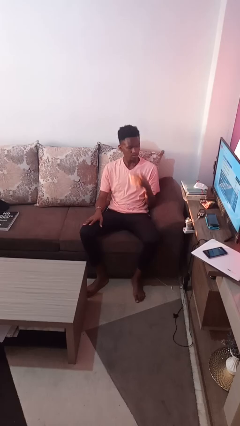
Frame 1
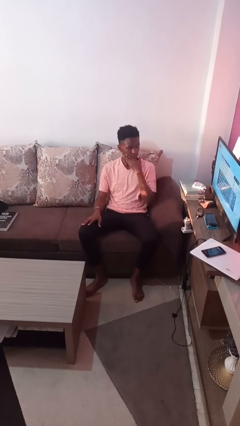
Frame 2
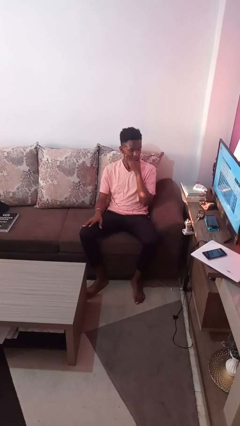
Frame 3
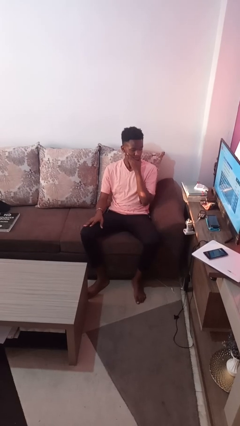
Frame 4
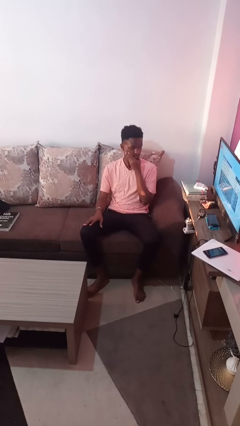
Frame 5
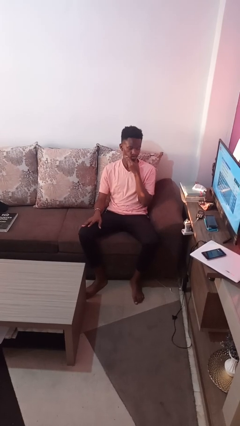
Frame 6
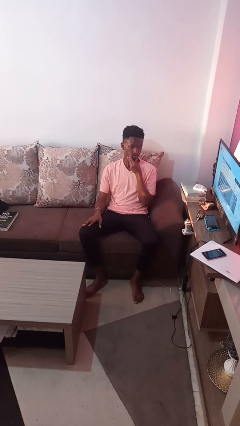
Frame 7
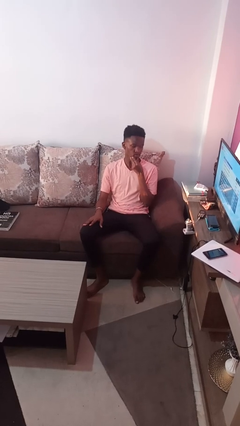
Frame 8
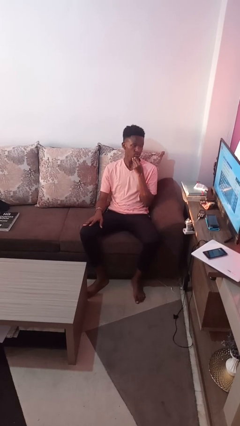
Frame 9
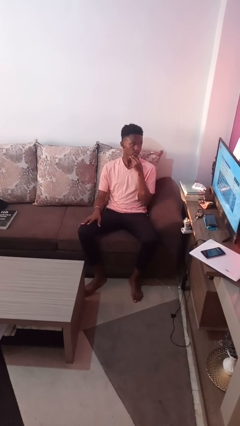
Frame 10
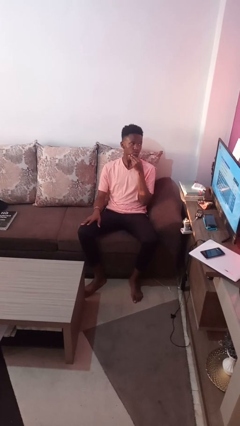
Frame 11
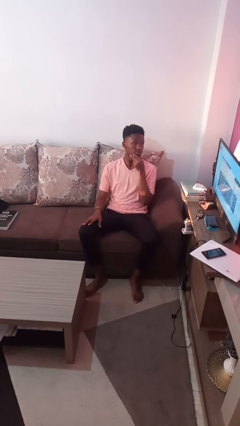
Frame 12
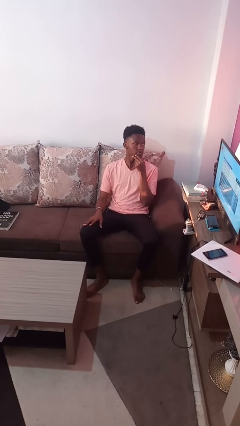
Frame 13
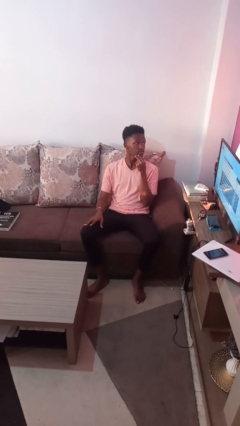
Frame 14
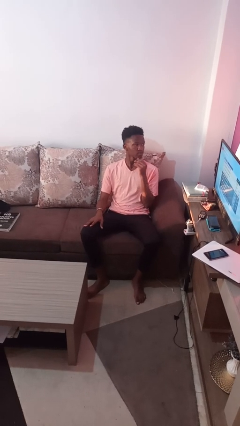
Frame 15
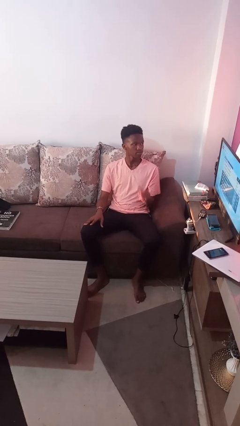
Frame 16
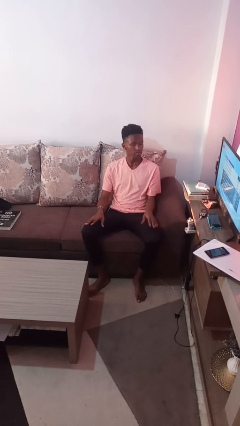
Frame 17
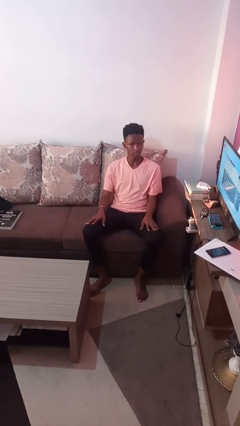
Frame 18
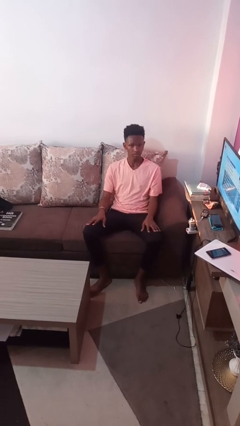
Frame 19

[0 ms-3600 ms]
person strokes chin

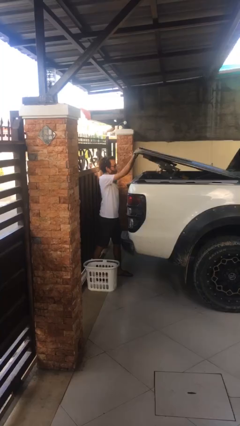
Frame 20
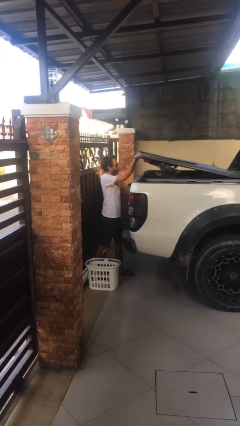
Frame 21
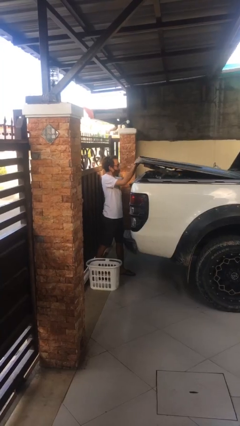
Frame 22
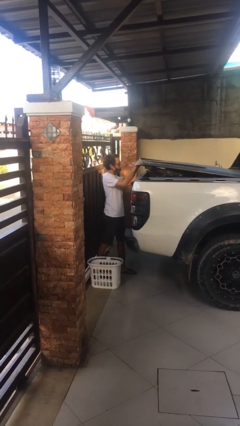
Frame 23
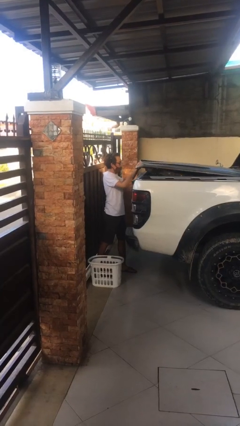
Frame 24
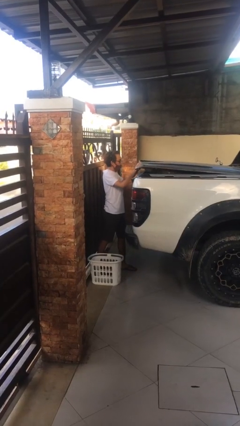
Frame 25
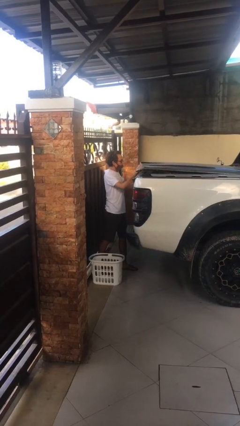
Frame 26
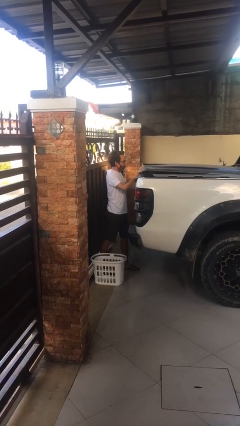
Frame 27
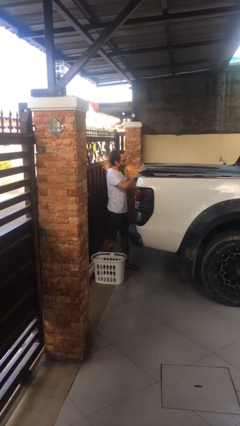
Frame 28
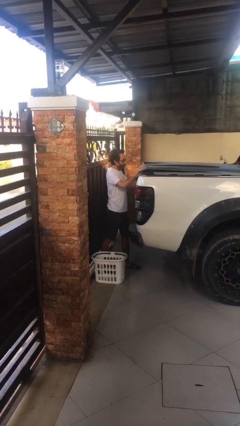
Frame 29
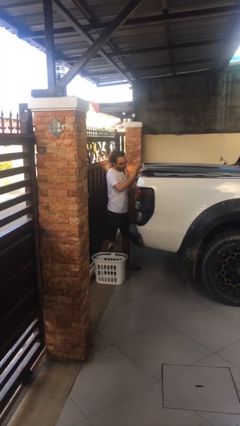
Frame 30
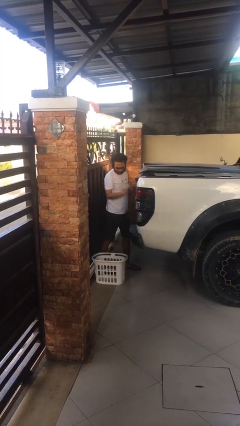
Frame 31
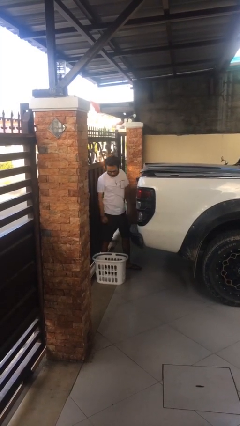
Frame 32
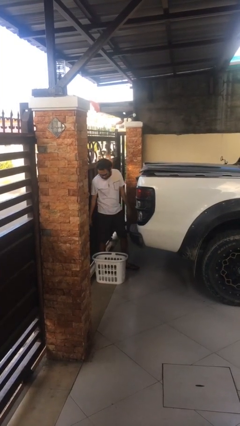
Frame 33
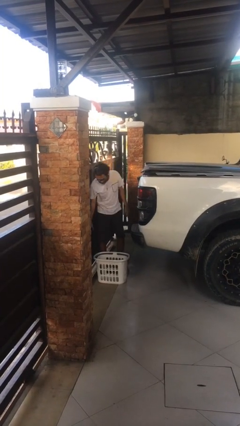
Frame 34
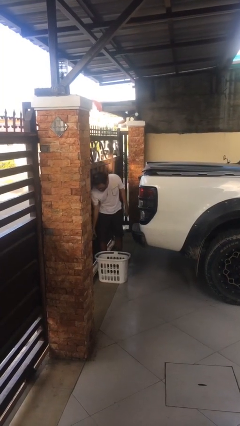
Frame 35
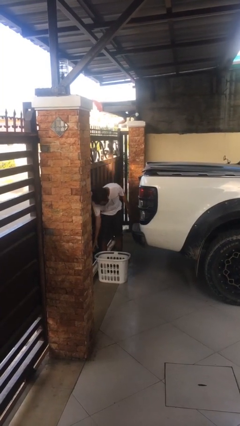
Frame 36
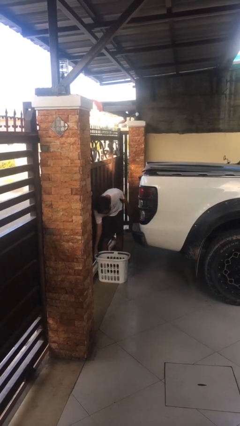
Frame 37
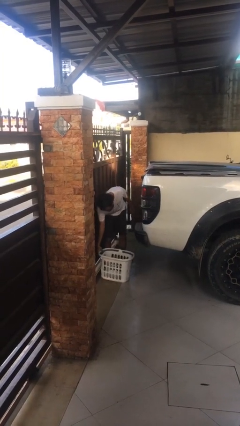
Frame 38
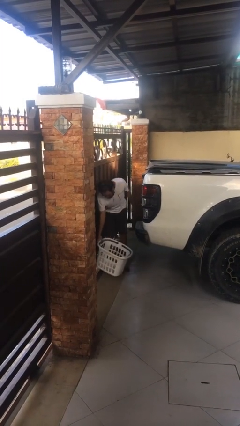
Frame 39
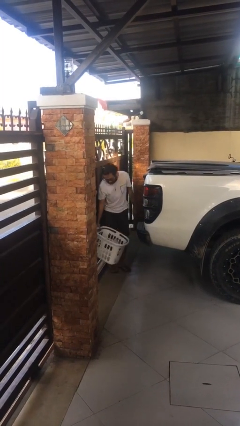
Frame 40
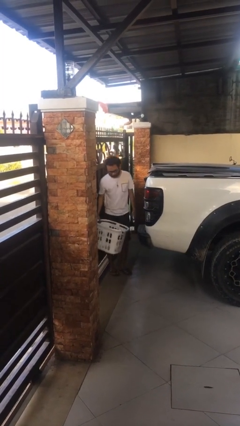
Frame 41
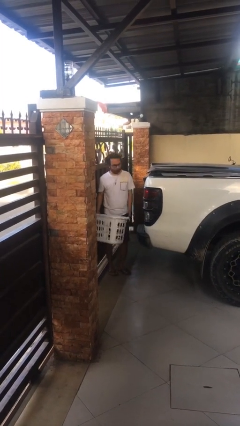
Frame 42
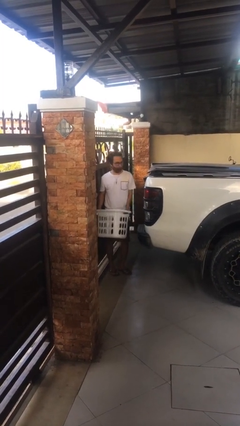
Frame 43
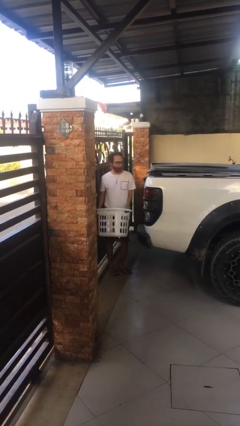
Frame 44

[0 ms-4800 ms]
person closes car trunk

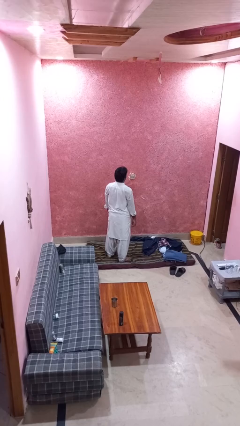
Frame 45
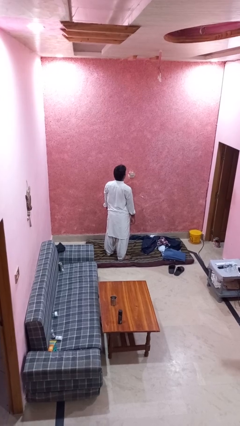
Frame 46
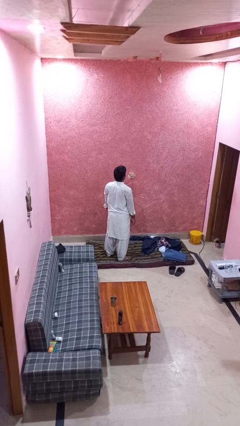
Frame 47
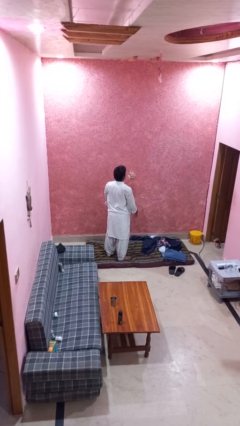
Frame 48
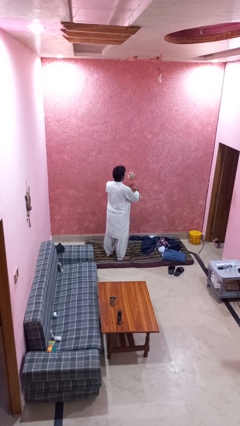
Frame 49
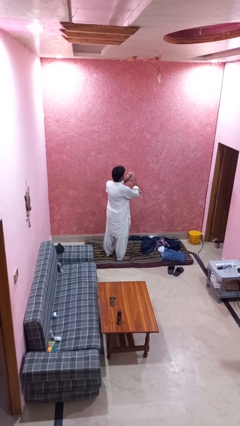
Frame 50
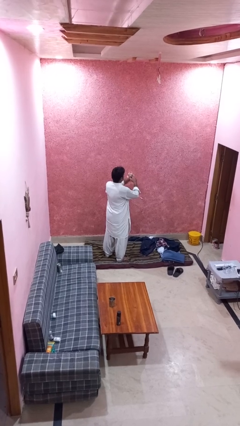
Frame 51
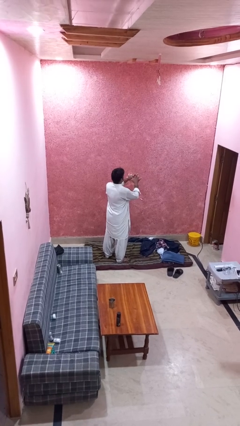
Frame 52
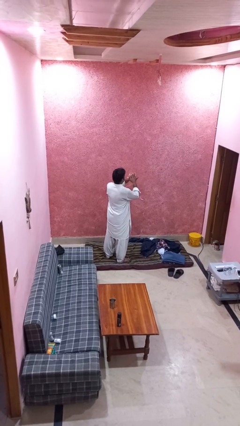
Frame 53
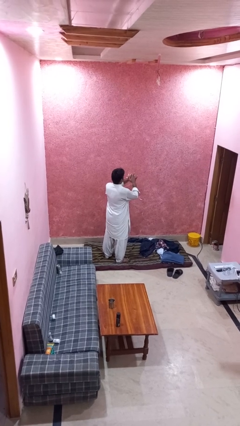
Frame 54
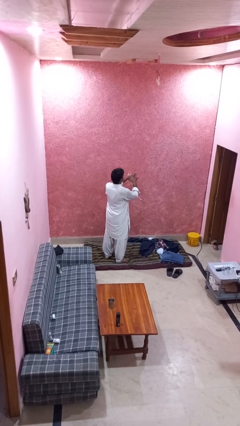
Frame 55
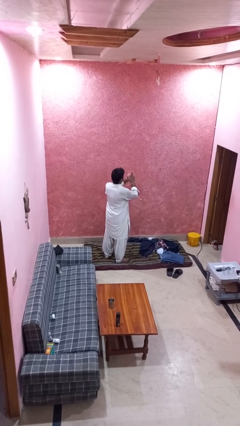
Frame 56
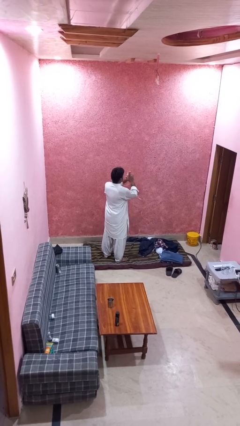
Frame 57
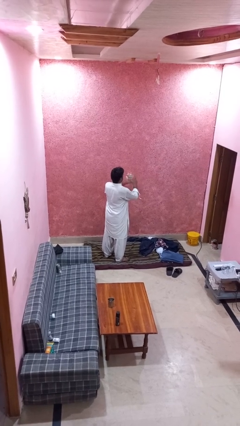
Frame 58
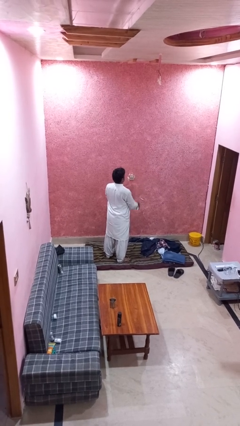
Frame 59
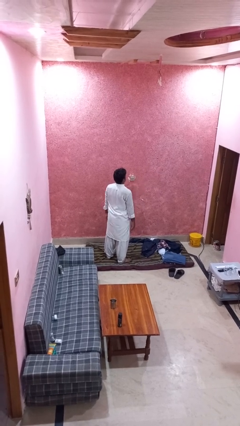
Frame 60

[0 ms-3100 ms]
person snaps fingers

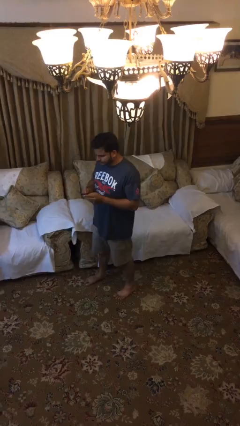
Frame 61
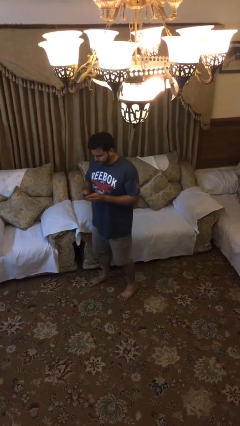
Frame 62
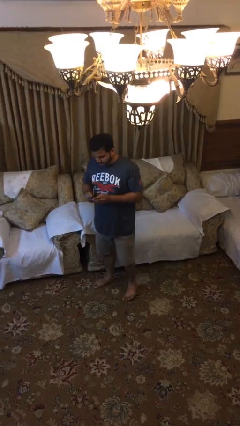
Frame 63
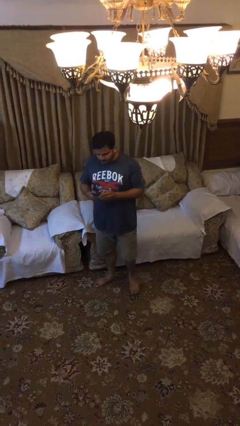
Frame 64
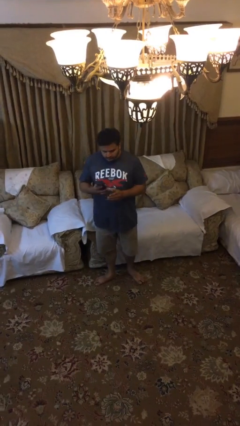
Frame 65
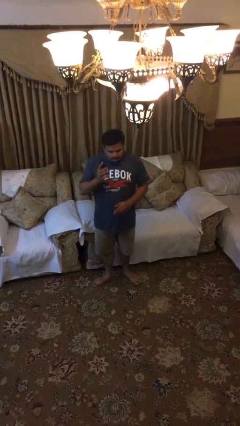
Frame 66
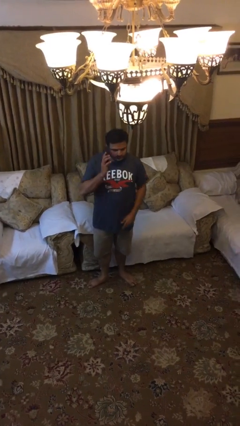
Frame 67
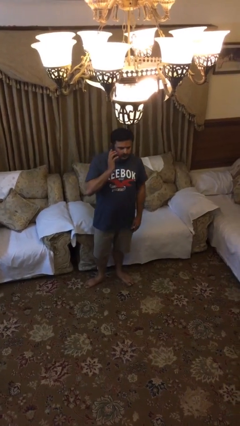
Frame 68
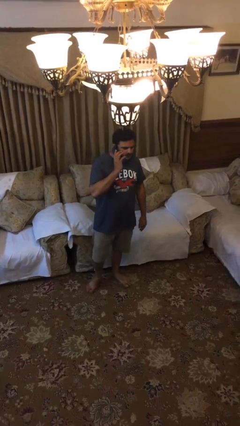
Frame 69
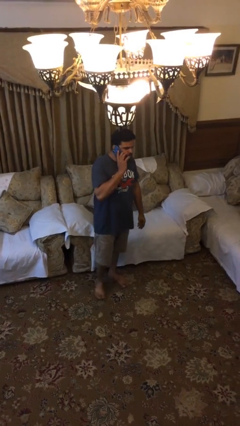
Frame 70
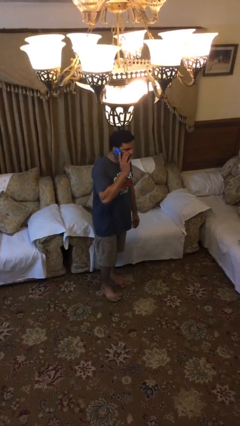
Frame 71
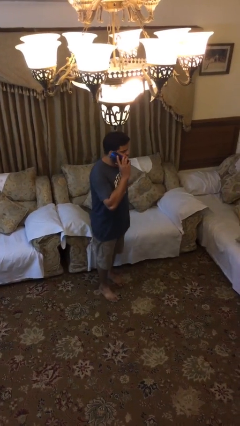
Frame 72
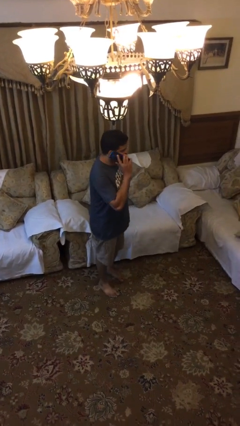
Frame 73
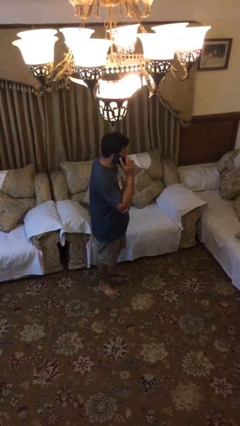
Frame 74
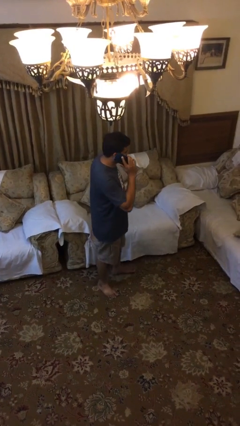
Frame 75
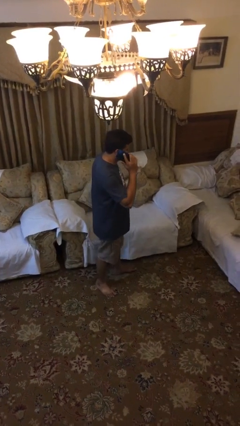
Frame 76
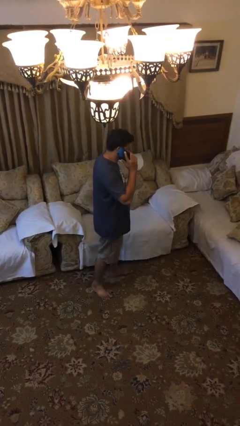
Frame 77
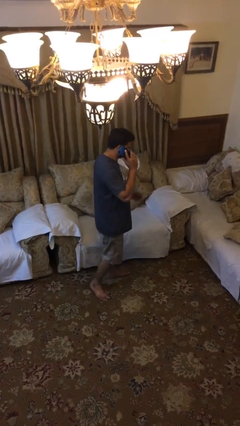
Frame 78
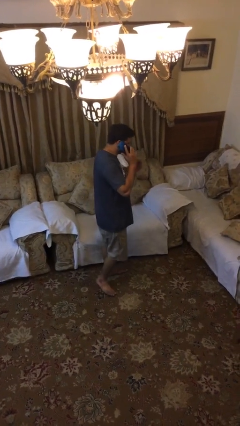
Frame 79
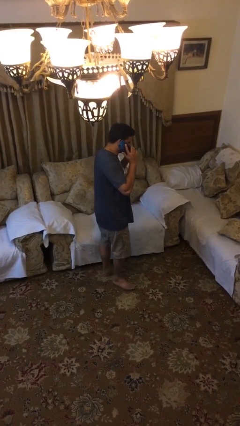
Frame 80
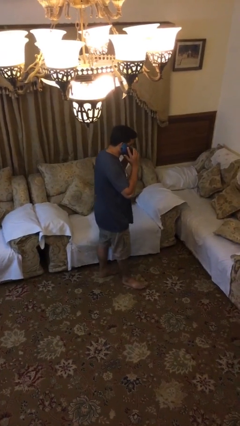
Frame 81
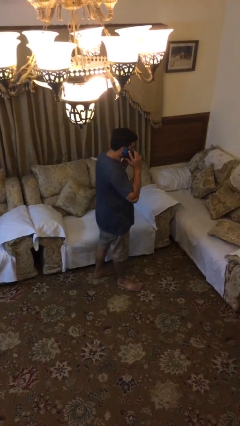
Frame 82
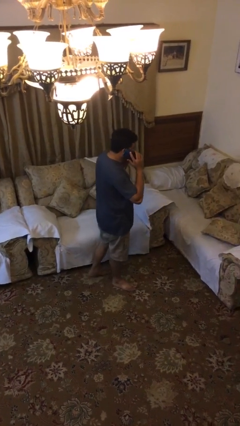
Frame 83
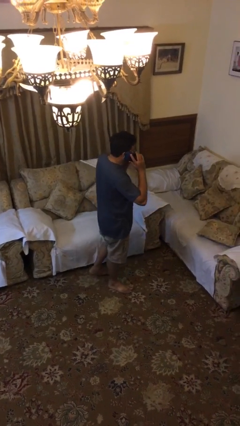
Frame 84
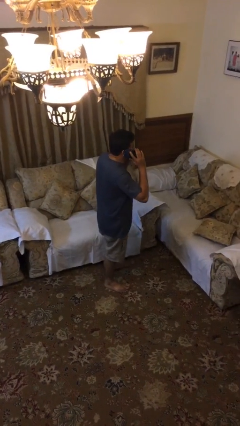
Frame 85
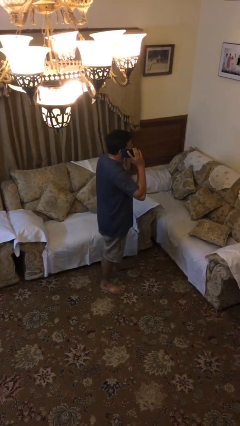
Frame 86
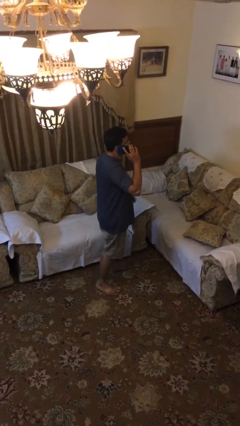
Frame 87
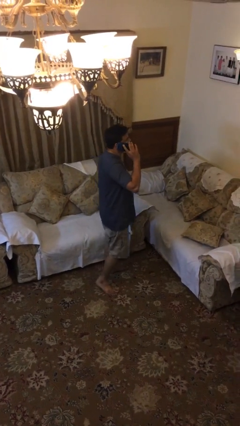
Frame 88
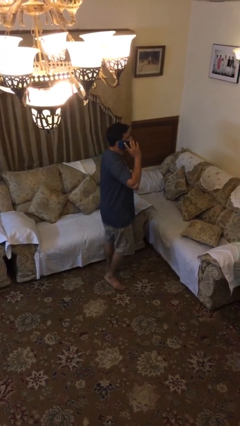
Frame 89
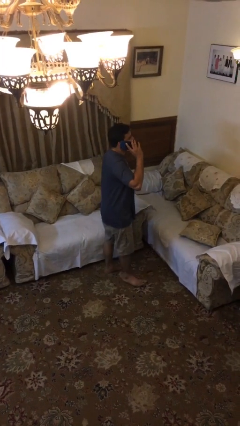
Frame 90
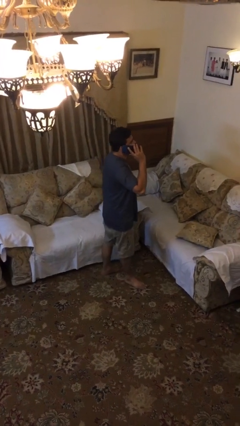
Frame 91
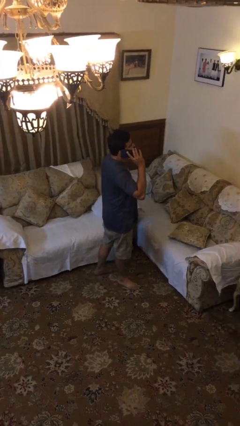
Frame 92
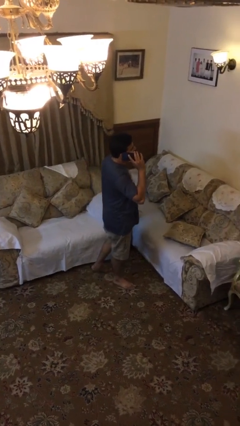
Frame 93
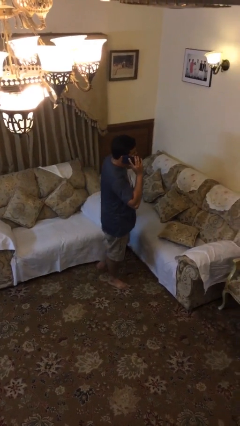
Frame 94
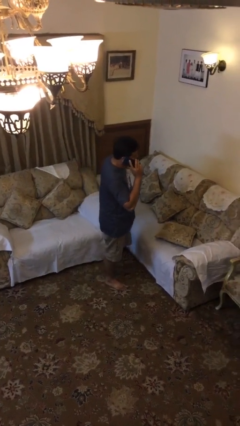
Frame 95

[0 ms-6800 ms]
person talks on phone
